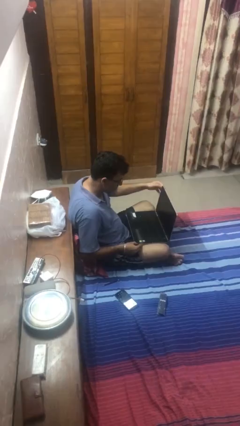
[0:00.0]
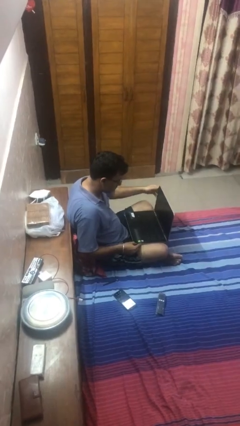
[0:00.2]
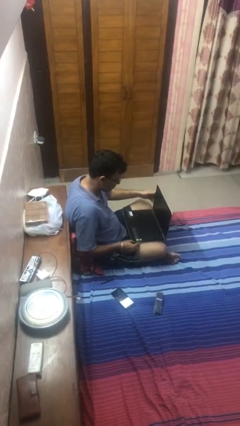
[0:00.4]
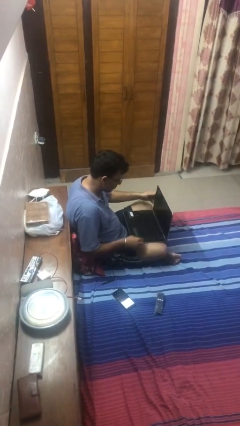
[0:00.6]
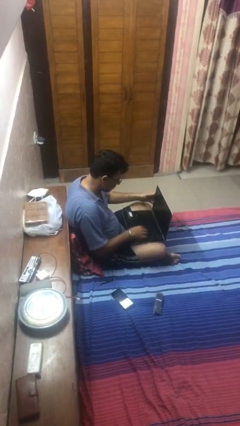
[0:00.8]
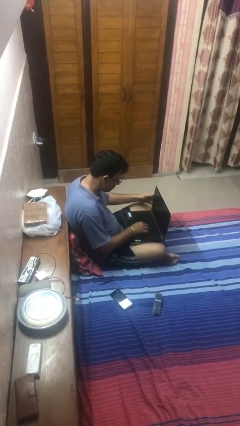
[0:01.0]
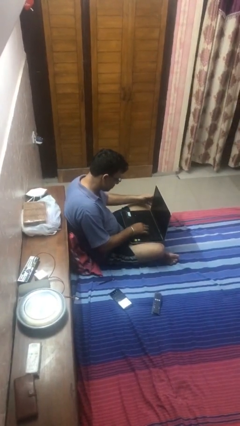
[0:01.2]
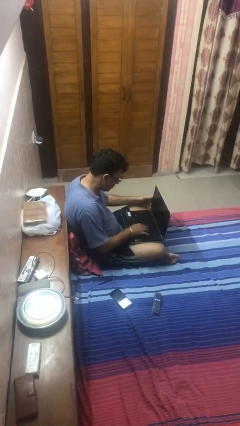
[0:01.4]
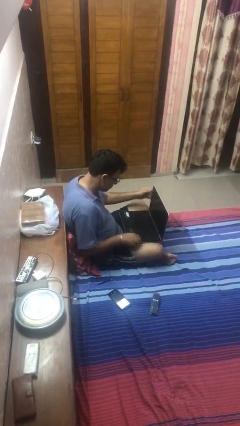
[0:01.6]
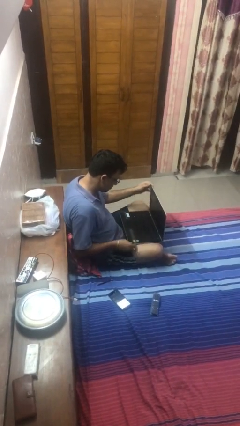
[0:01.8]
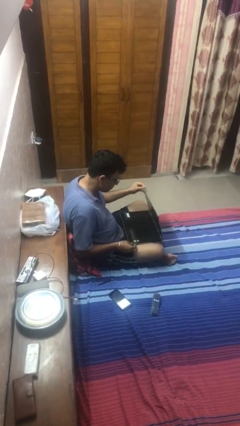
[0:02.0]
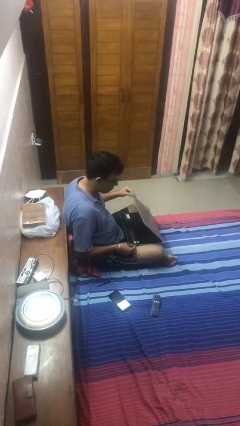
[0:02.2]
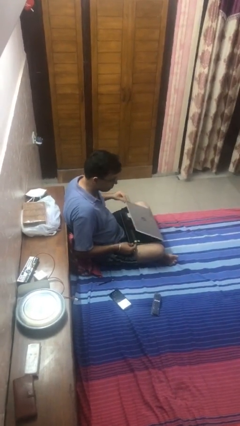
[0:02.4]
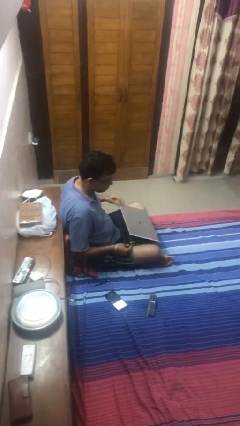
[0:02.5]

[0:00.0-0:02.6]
person closes laptop

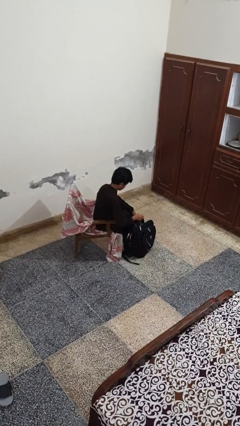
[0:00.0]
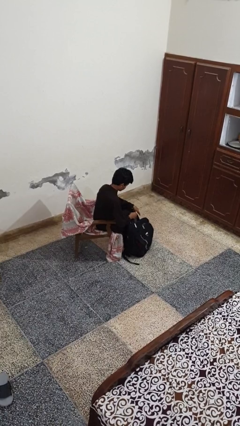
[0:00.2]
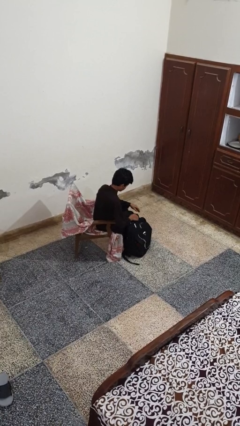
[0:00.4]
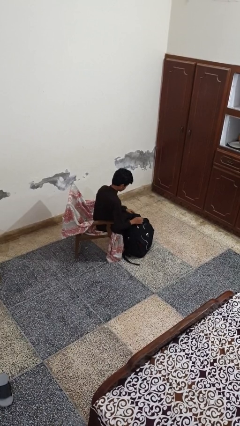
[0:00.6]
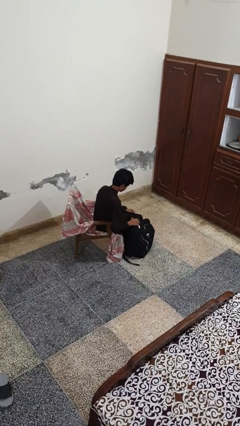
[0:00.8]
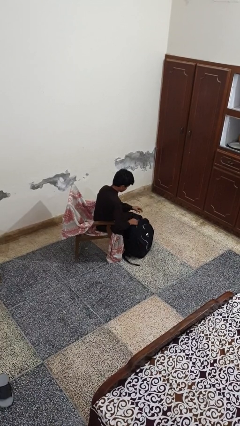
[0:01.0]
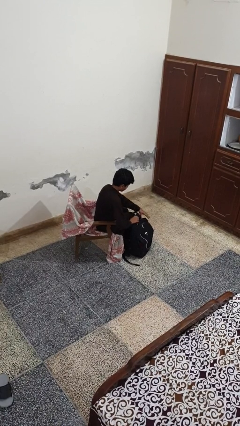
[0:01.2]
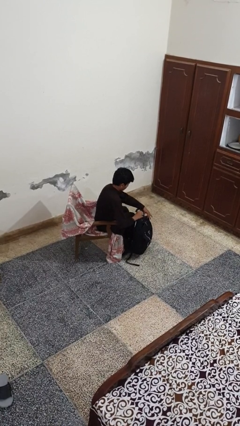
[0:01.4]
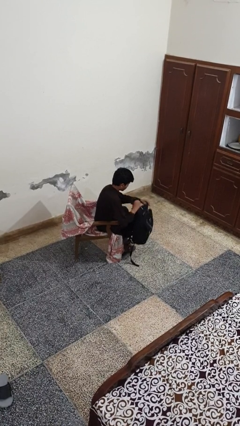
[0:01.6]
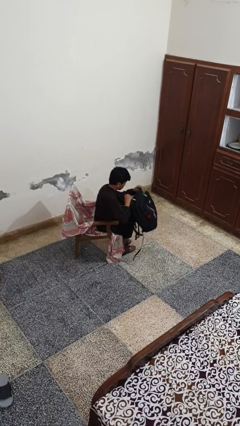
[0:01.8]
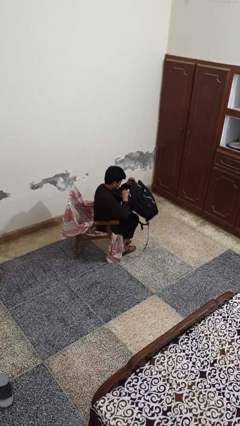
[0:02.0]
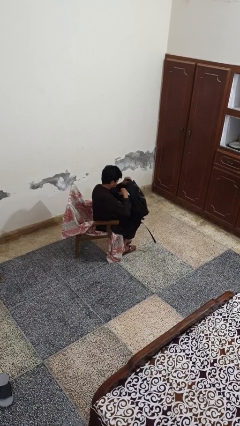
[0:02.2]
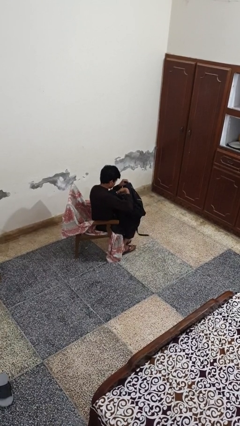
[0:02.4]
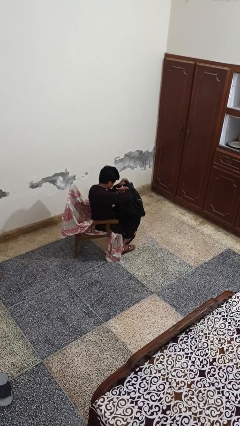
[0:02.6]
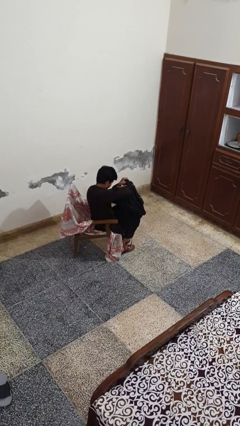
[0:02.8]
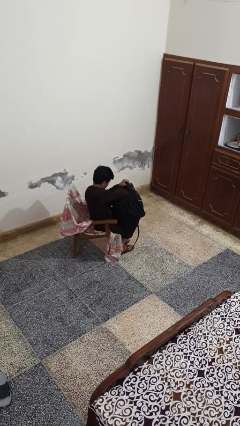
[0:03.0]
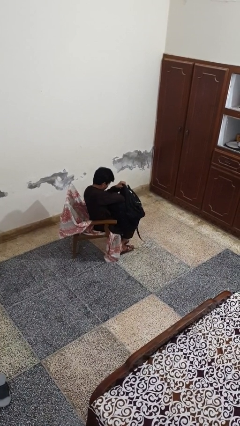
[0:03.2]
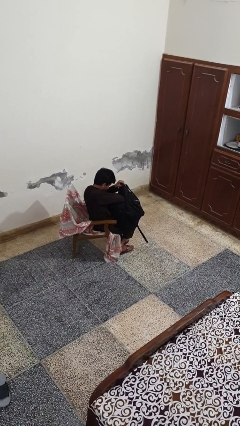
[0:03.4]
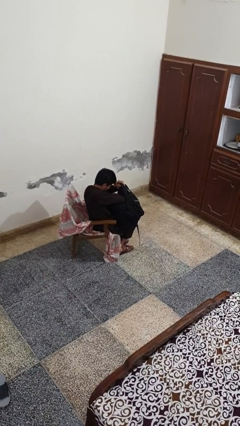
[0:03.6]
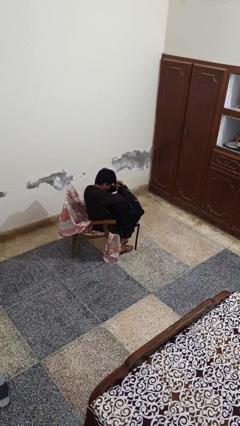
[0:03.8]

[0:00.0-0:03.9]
person searches in backpack
